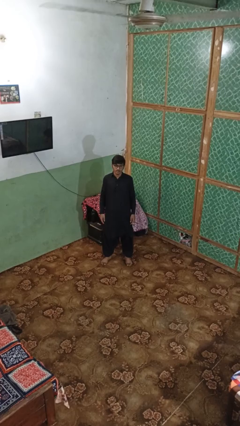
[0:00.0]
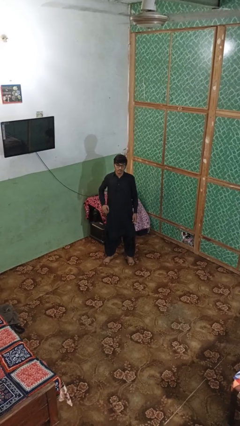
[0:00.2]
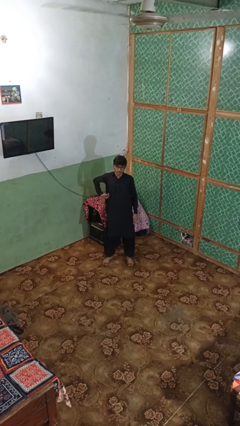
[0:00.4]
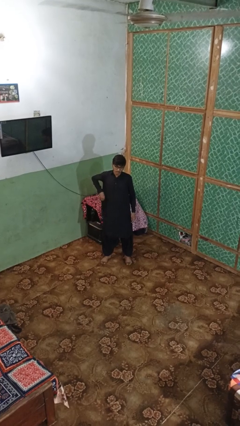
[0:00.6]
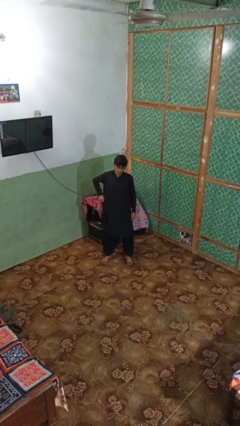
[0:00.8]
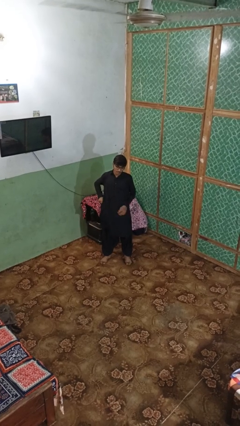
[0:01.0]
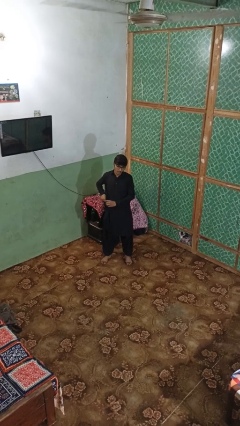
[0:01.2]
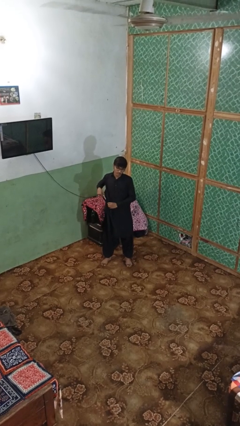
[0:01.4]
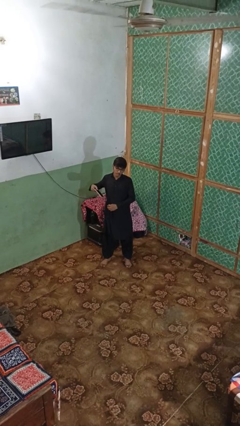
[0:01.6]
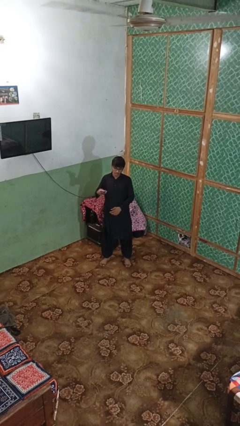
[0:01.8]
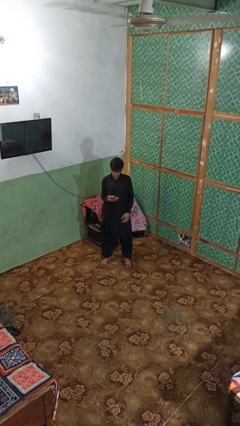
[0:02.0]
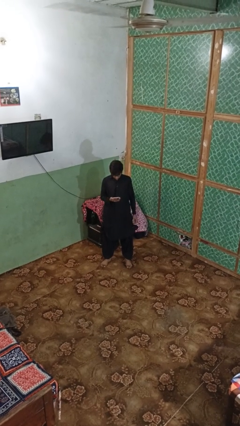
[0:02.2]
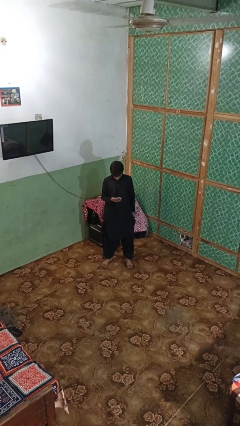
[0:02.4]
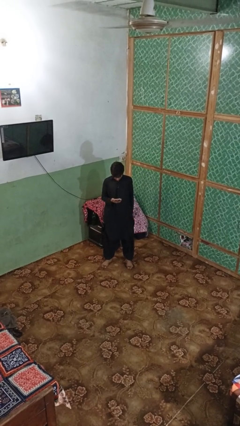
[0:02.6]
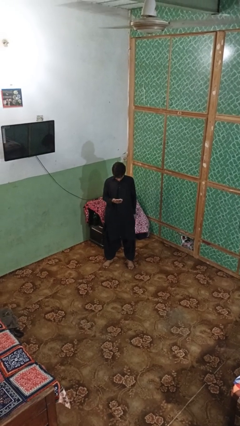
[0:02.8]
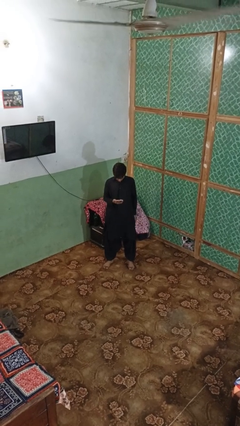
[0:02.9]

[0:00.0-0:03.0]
person takes phone from pocket

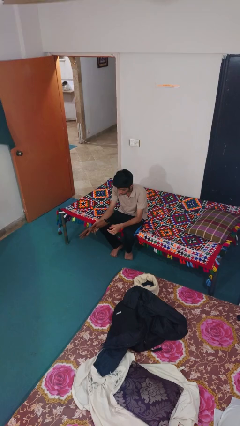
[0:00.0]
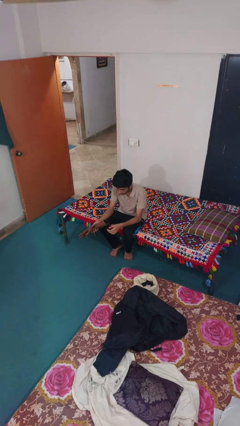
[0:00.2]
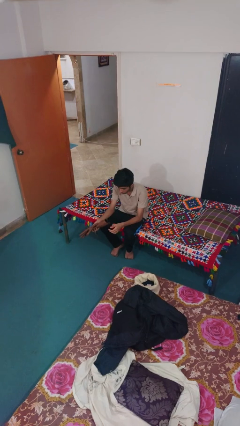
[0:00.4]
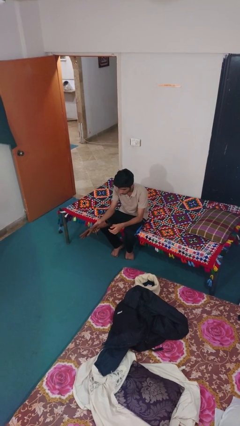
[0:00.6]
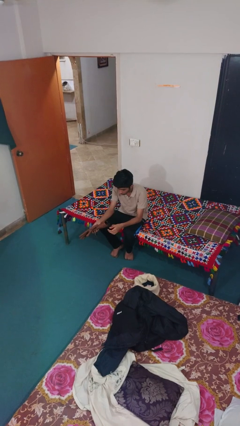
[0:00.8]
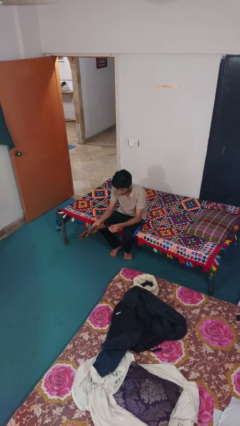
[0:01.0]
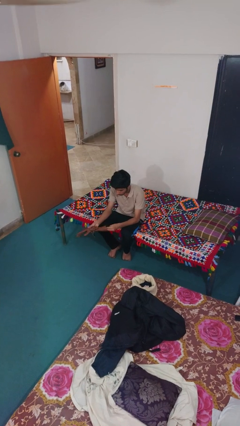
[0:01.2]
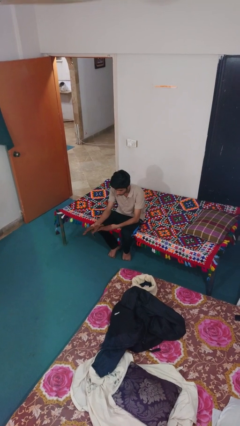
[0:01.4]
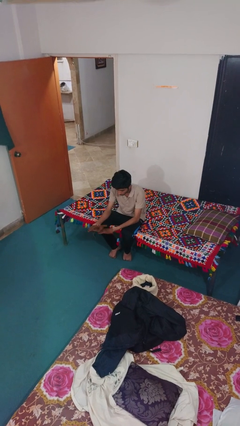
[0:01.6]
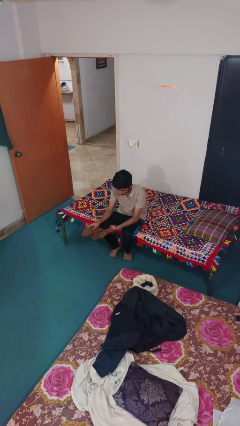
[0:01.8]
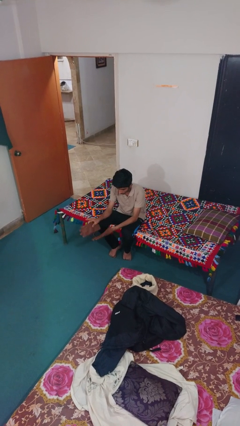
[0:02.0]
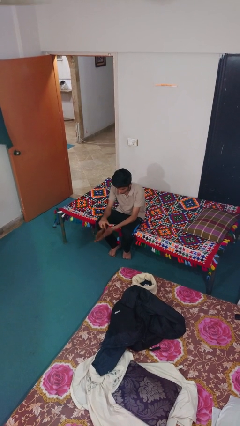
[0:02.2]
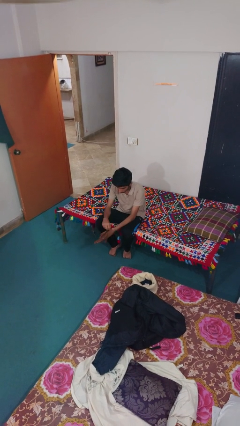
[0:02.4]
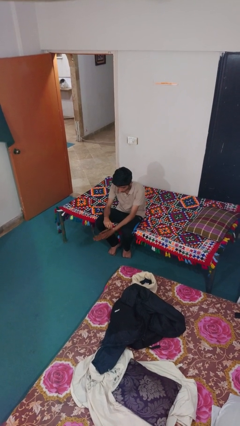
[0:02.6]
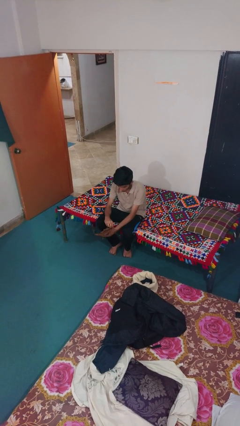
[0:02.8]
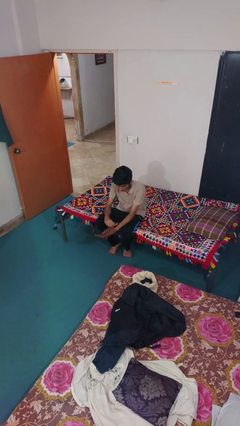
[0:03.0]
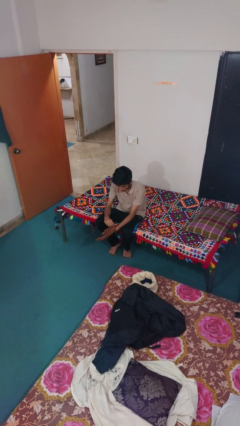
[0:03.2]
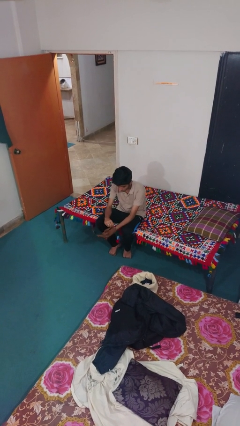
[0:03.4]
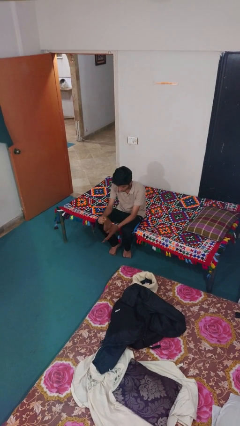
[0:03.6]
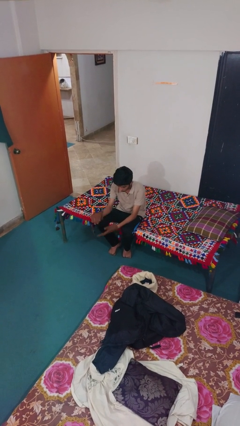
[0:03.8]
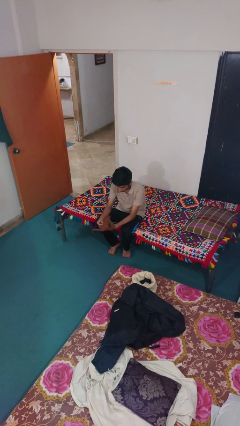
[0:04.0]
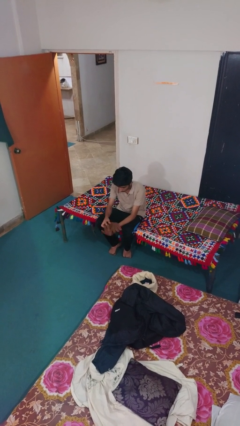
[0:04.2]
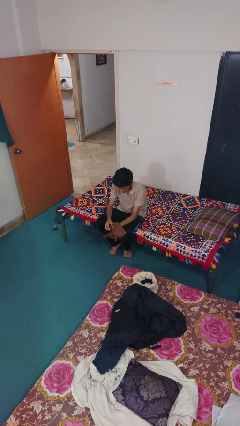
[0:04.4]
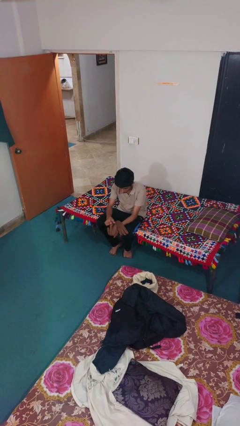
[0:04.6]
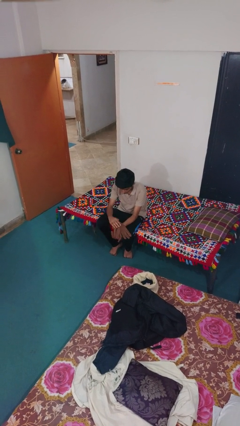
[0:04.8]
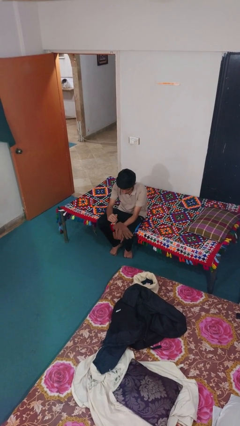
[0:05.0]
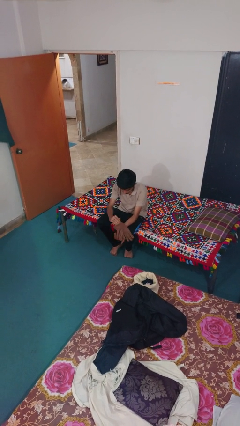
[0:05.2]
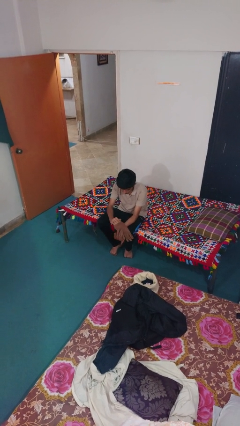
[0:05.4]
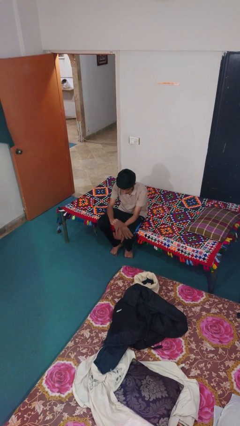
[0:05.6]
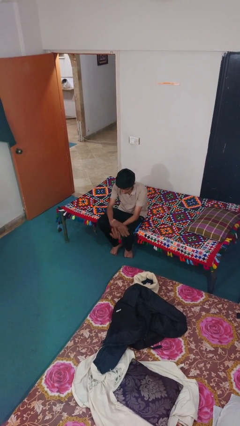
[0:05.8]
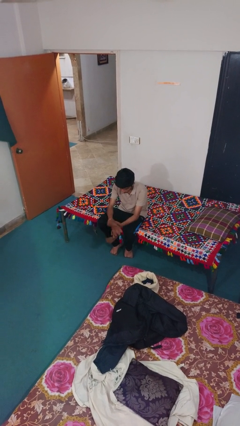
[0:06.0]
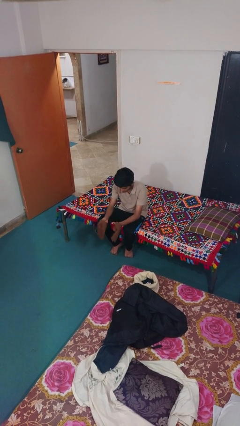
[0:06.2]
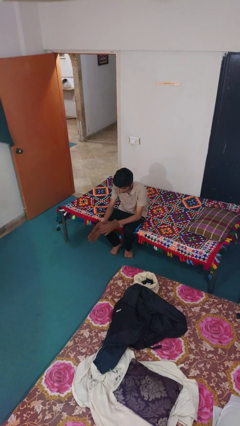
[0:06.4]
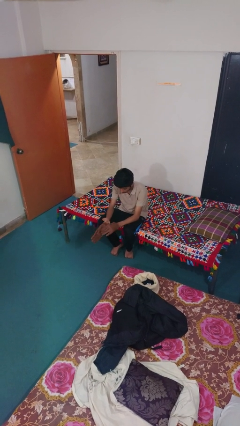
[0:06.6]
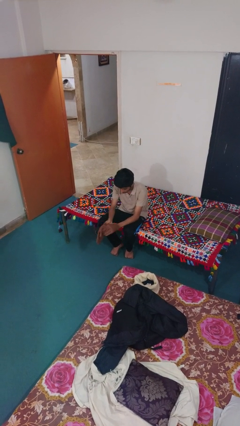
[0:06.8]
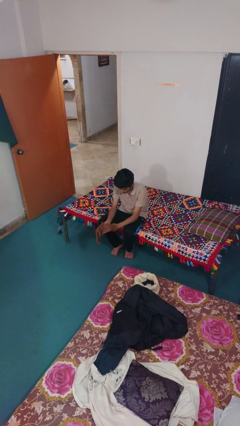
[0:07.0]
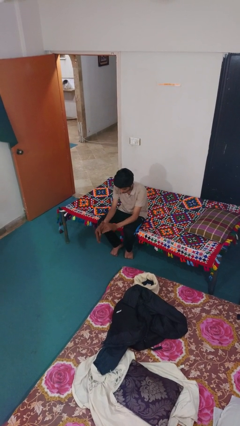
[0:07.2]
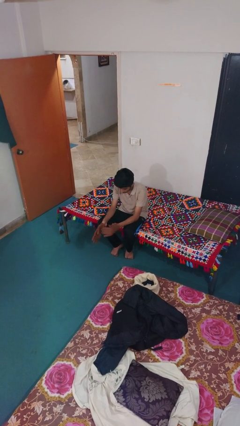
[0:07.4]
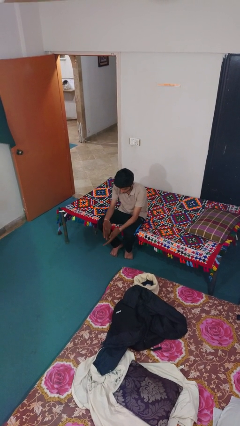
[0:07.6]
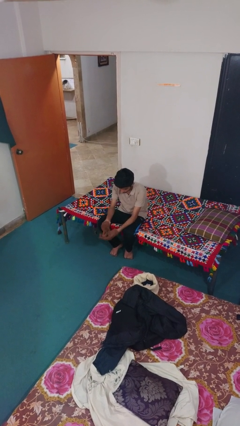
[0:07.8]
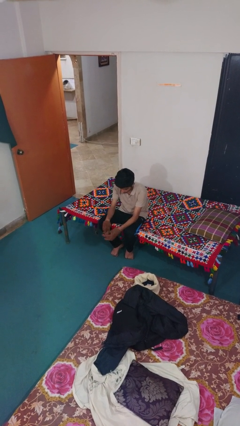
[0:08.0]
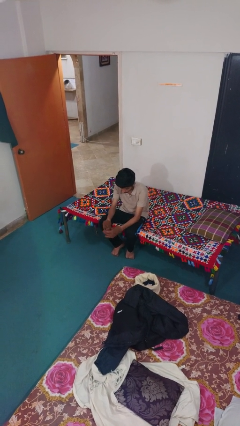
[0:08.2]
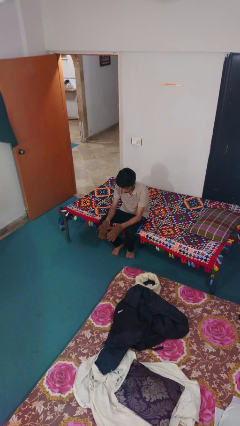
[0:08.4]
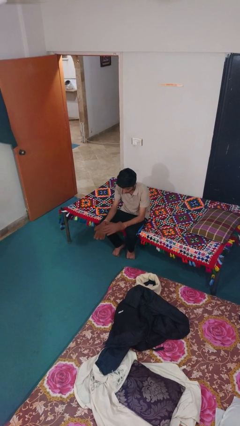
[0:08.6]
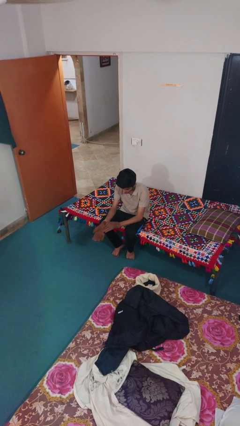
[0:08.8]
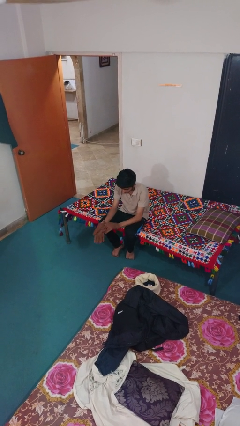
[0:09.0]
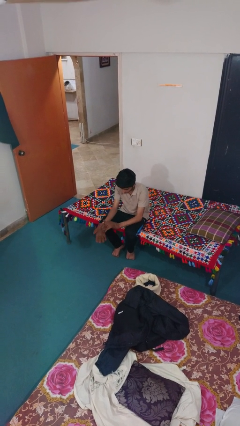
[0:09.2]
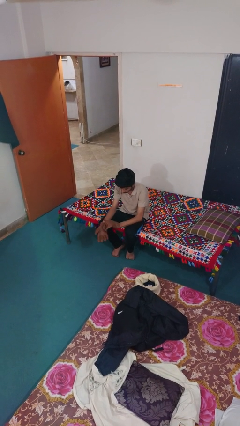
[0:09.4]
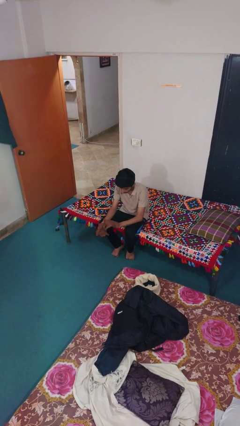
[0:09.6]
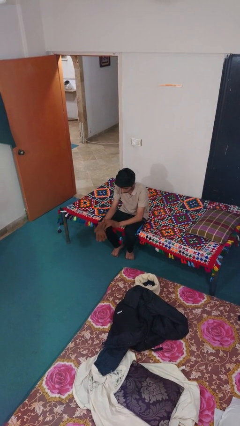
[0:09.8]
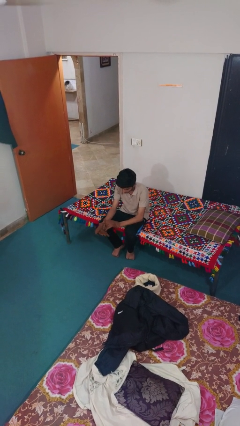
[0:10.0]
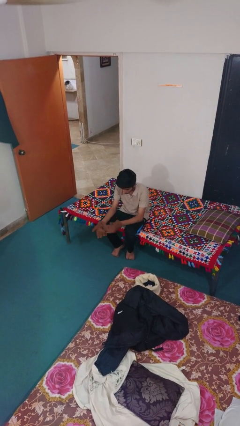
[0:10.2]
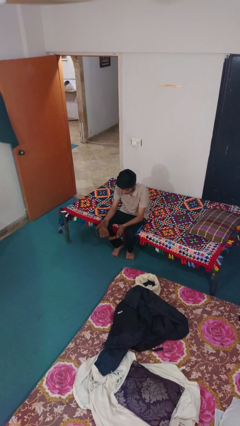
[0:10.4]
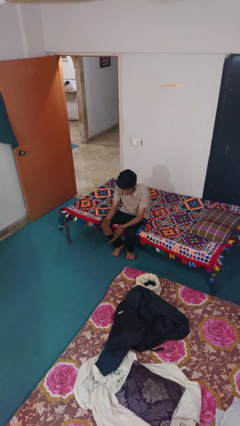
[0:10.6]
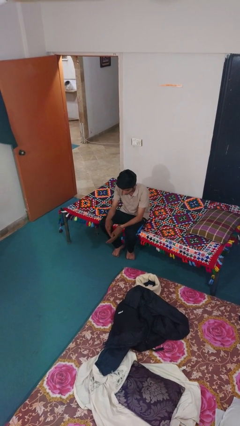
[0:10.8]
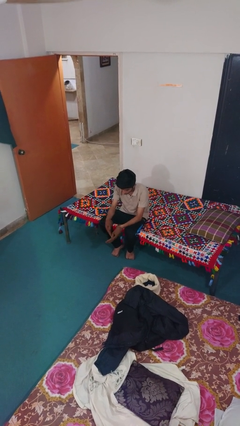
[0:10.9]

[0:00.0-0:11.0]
person puts on gloves

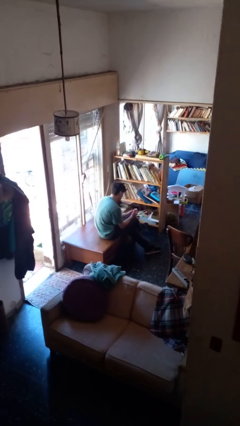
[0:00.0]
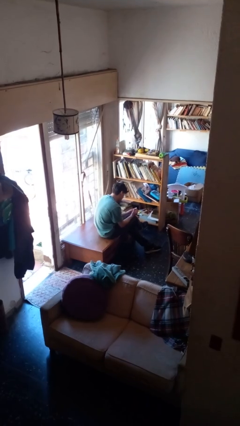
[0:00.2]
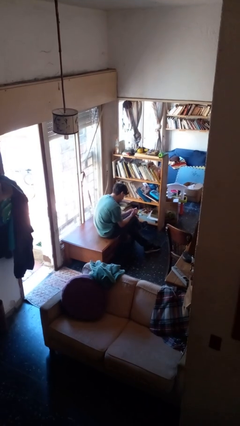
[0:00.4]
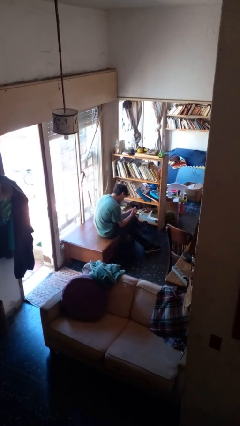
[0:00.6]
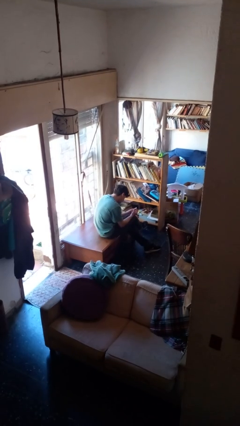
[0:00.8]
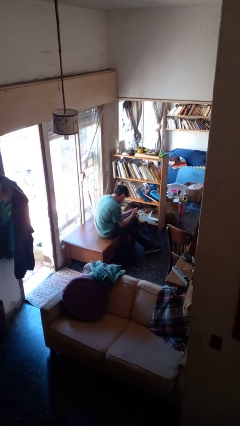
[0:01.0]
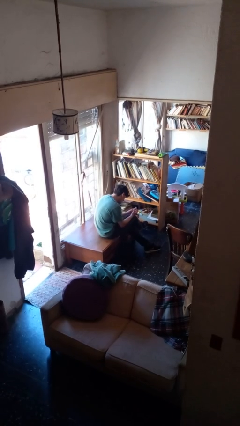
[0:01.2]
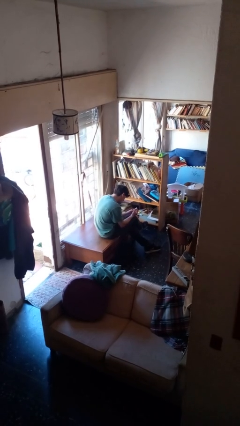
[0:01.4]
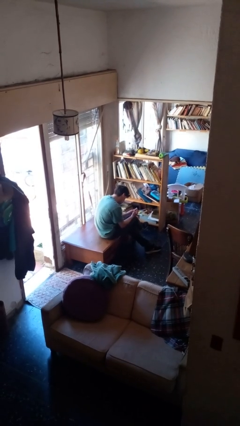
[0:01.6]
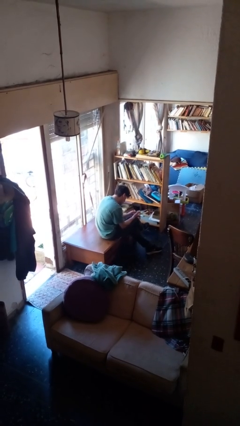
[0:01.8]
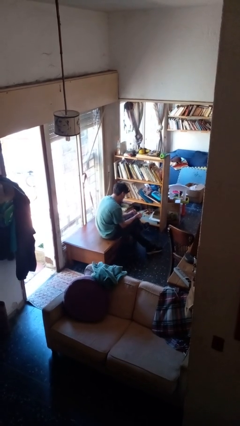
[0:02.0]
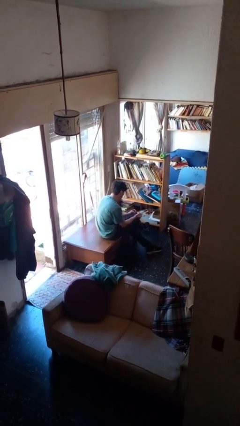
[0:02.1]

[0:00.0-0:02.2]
person paints fingernails

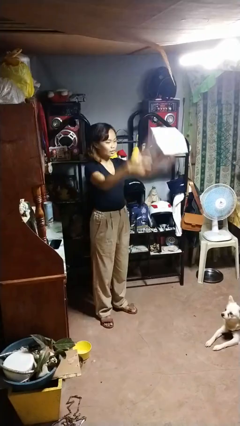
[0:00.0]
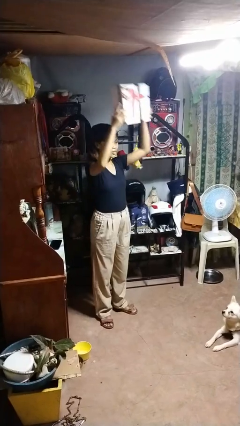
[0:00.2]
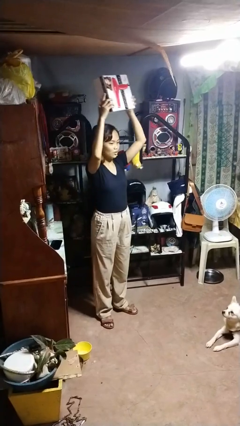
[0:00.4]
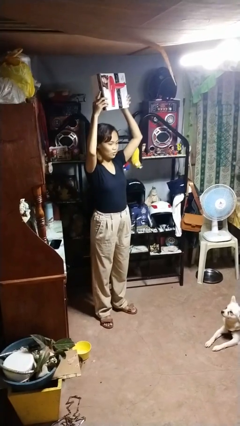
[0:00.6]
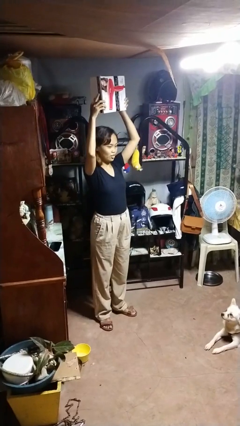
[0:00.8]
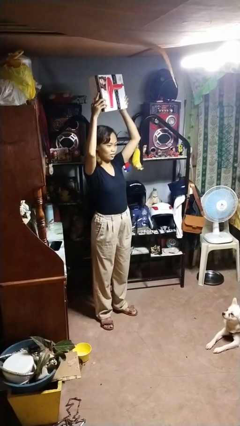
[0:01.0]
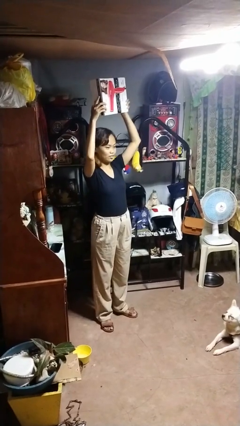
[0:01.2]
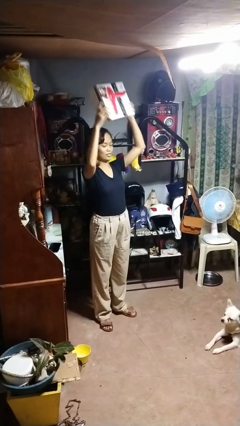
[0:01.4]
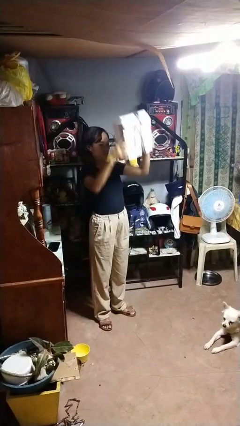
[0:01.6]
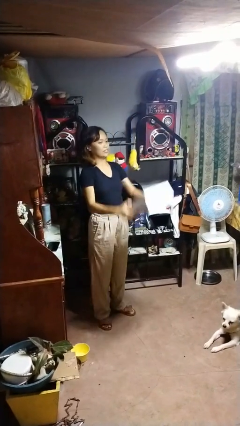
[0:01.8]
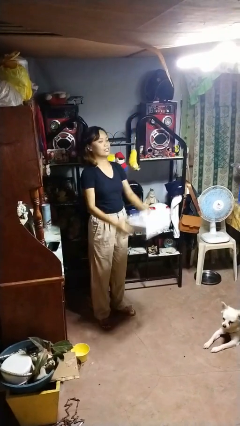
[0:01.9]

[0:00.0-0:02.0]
person holds object above head
